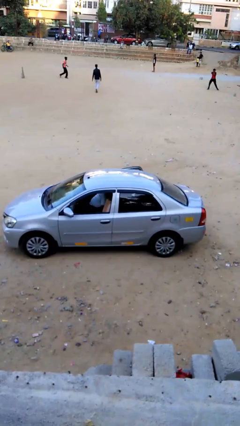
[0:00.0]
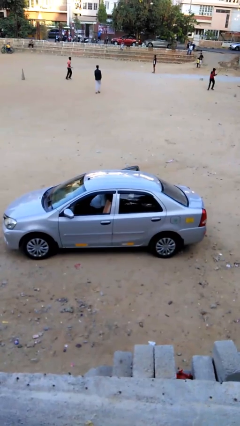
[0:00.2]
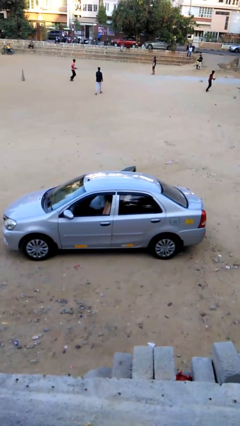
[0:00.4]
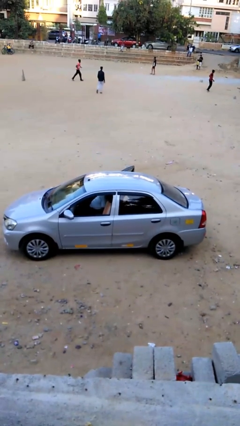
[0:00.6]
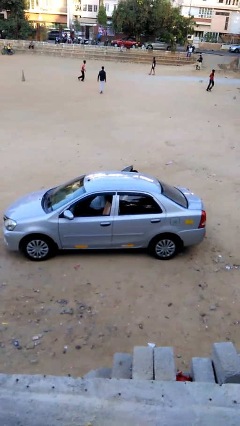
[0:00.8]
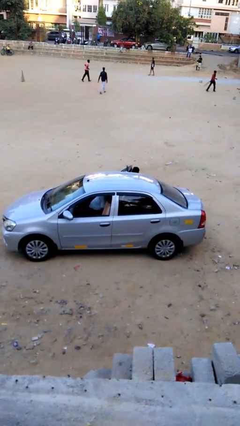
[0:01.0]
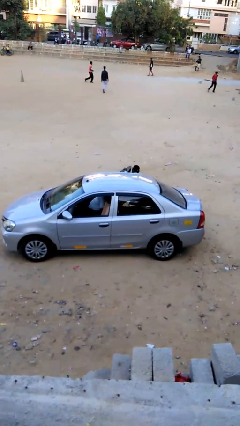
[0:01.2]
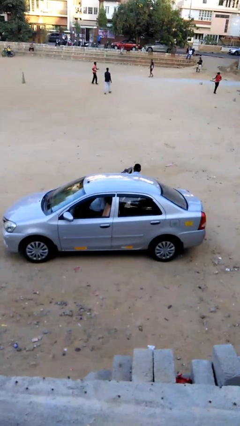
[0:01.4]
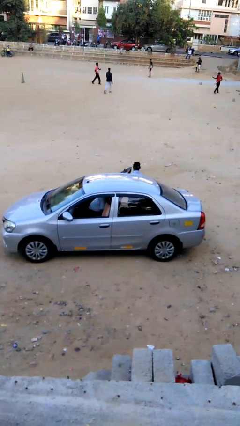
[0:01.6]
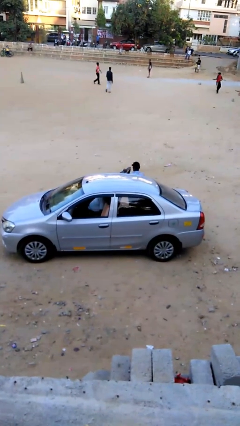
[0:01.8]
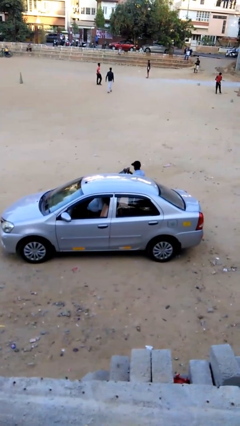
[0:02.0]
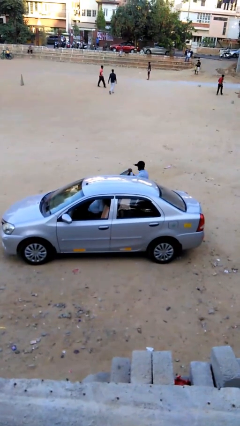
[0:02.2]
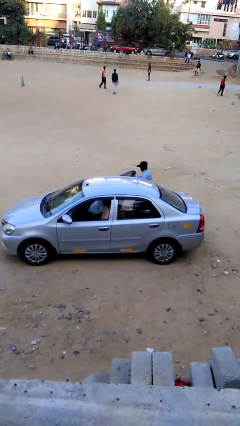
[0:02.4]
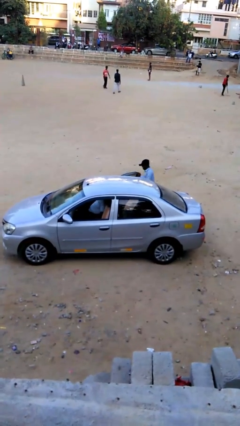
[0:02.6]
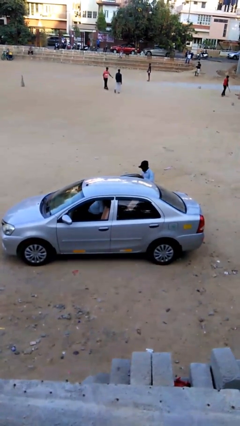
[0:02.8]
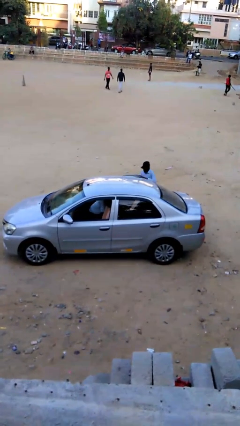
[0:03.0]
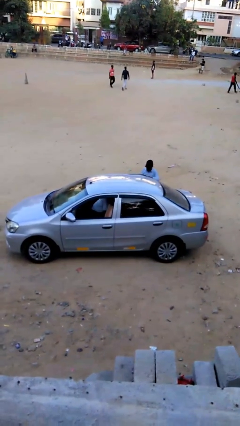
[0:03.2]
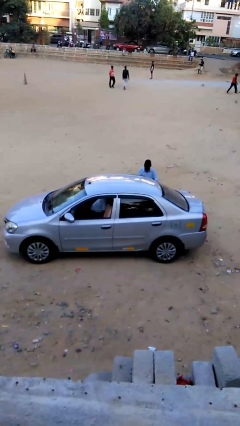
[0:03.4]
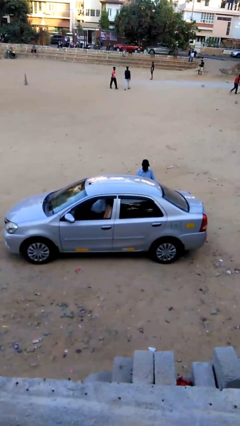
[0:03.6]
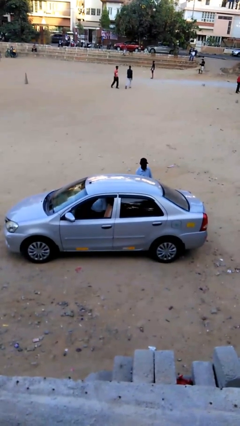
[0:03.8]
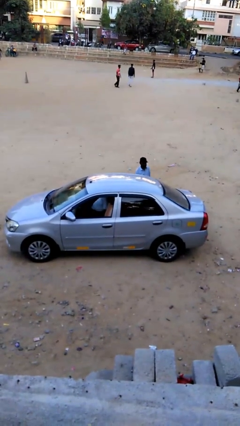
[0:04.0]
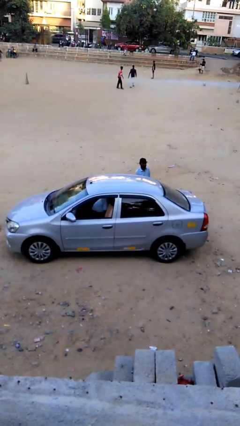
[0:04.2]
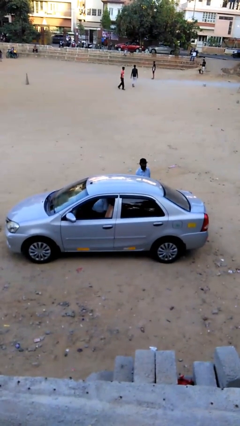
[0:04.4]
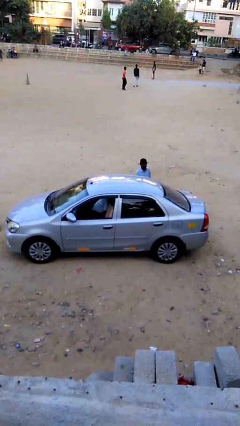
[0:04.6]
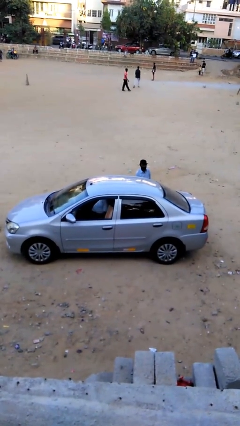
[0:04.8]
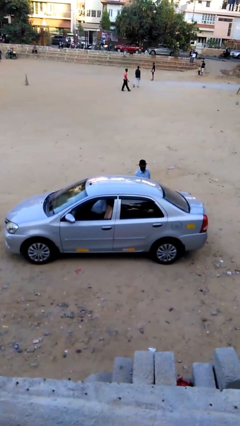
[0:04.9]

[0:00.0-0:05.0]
car drops off person

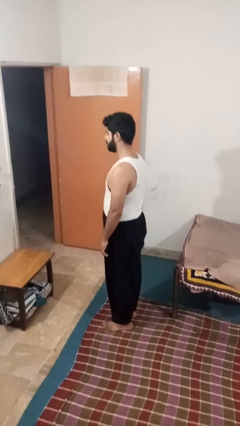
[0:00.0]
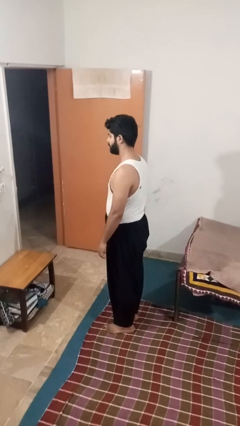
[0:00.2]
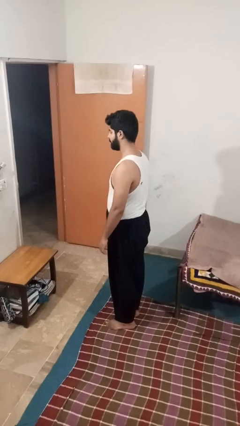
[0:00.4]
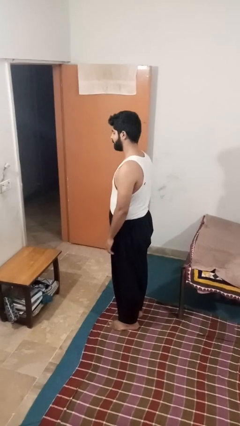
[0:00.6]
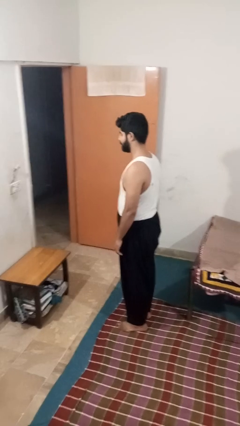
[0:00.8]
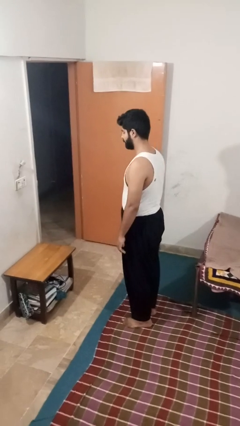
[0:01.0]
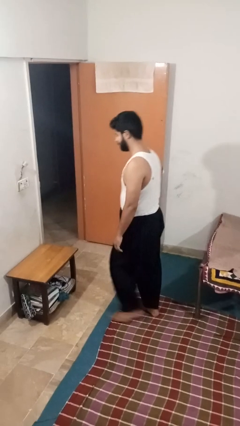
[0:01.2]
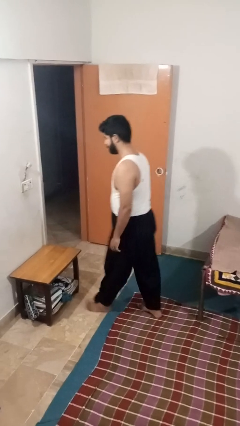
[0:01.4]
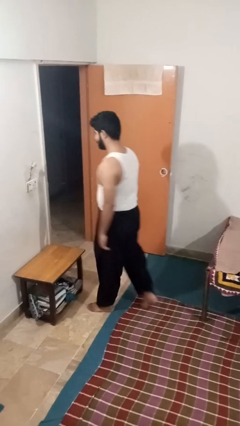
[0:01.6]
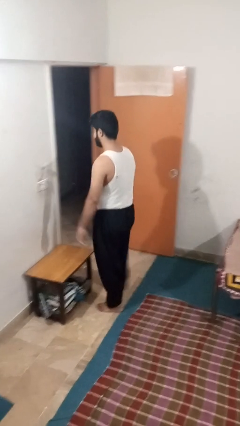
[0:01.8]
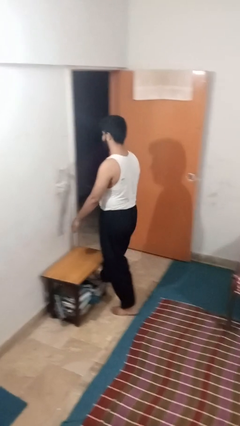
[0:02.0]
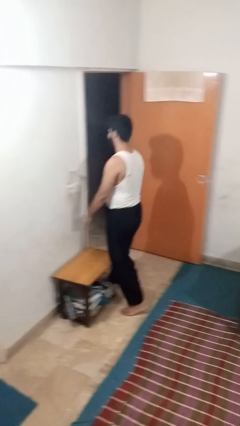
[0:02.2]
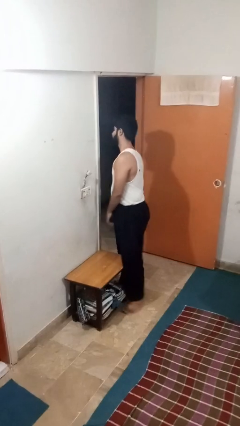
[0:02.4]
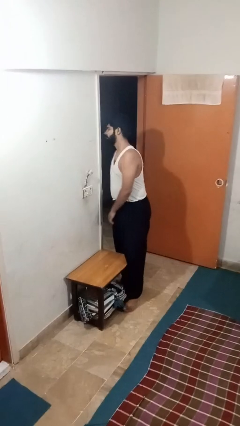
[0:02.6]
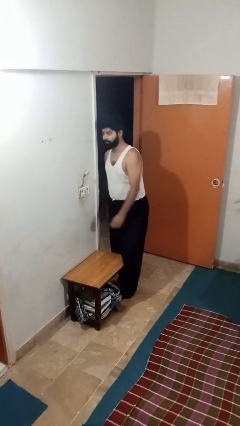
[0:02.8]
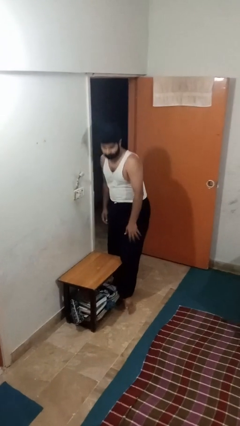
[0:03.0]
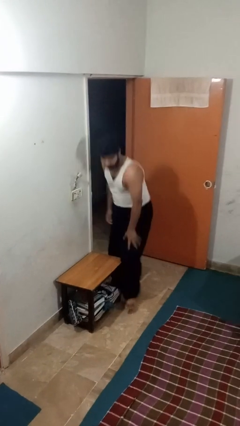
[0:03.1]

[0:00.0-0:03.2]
person bumps into table

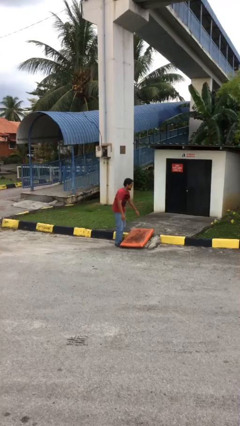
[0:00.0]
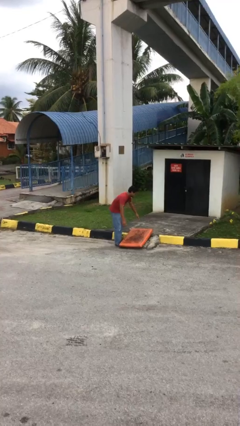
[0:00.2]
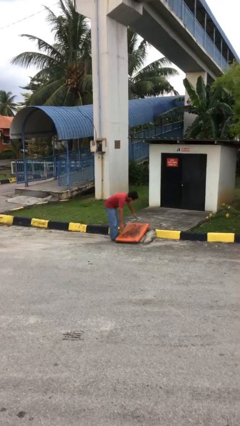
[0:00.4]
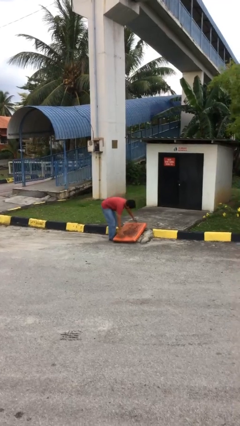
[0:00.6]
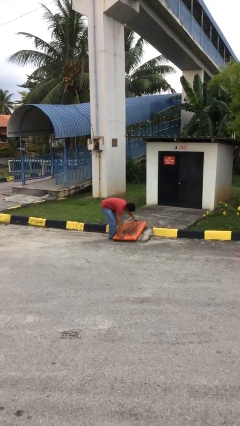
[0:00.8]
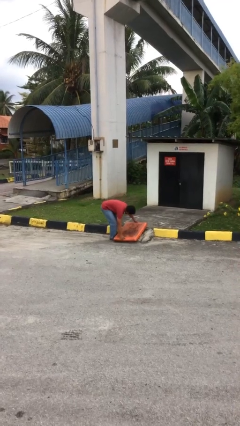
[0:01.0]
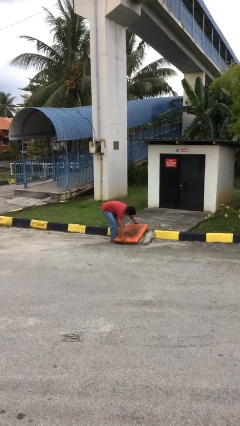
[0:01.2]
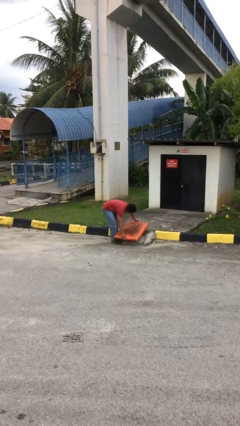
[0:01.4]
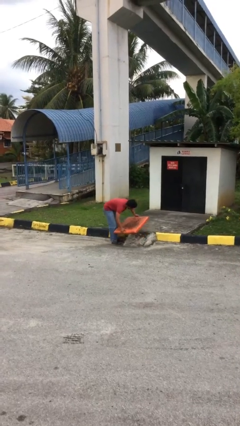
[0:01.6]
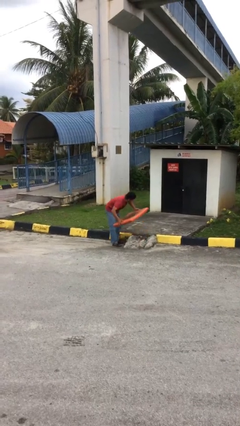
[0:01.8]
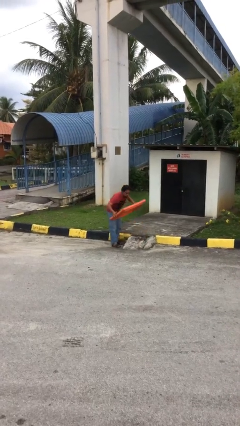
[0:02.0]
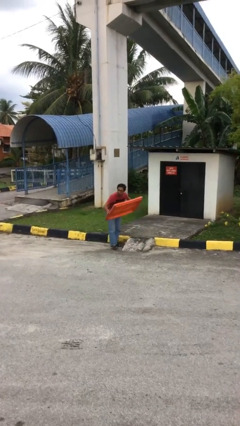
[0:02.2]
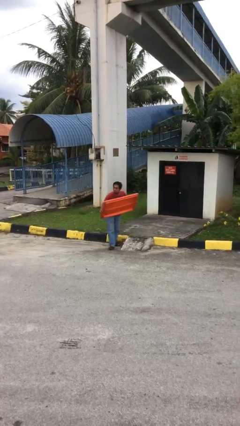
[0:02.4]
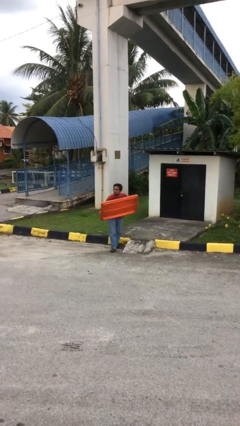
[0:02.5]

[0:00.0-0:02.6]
person picks up object from floor

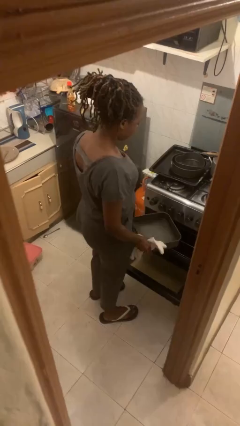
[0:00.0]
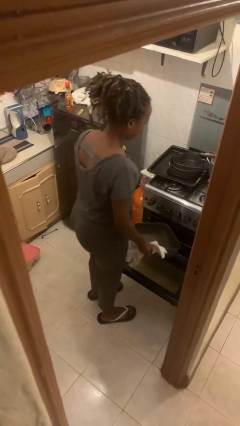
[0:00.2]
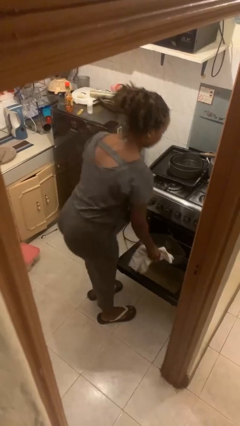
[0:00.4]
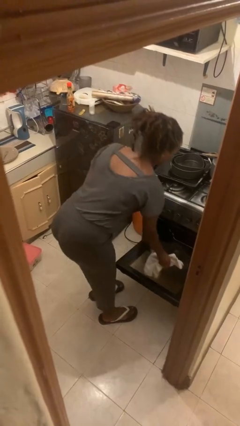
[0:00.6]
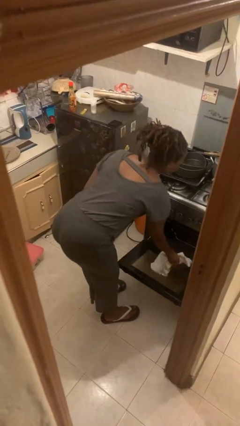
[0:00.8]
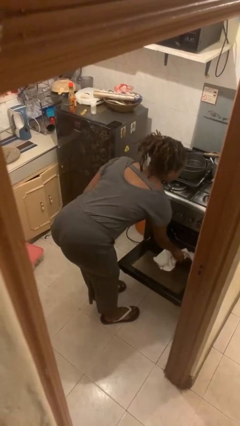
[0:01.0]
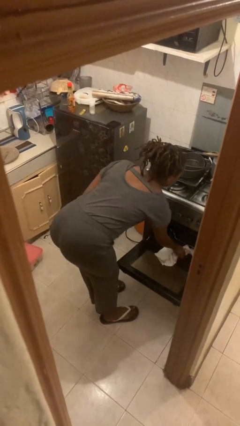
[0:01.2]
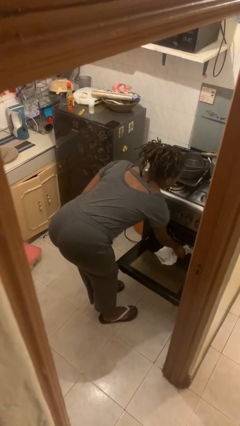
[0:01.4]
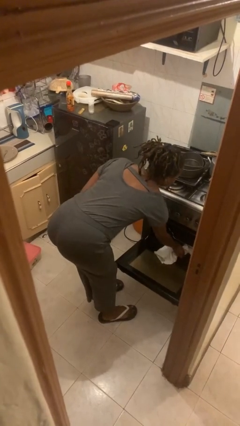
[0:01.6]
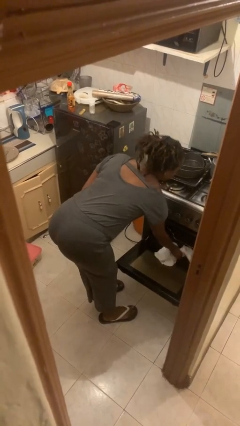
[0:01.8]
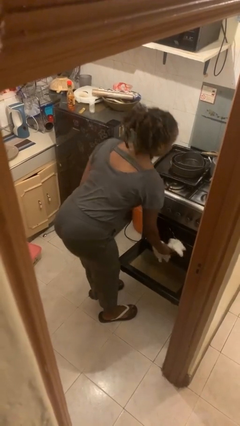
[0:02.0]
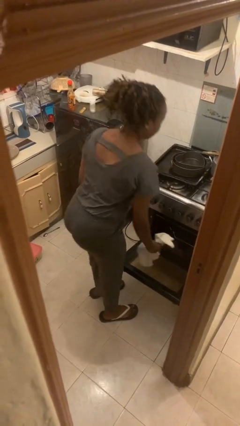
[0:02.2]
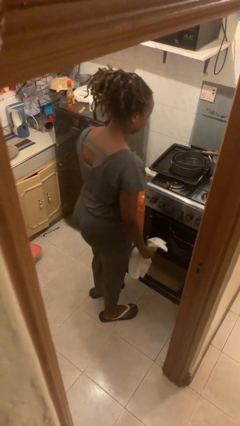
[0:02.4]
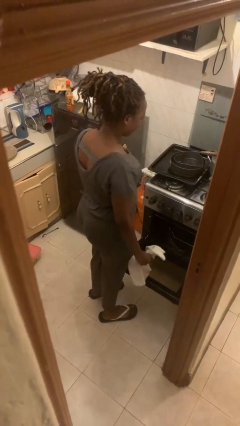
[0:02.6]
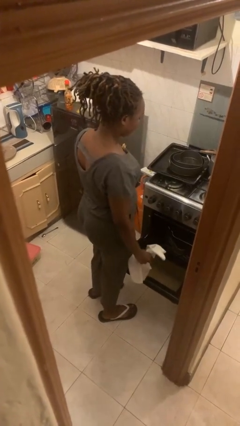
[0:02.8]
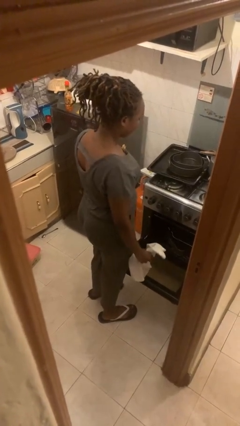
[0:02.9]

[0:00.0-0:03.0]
person puts object into oven

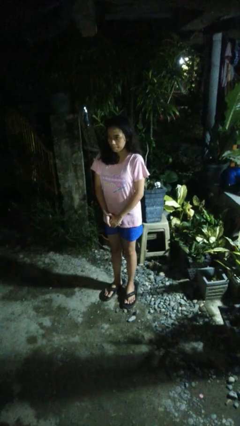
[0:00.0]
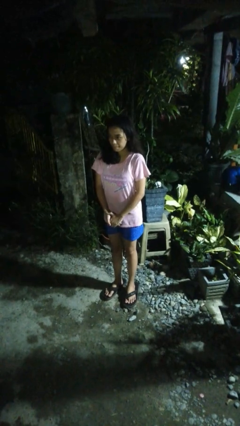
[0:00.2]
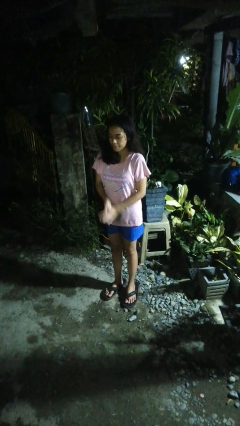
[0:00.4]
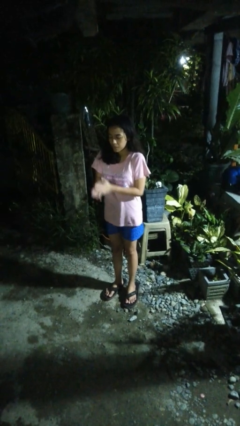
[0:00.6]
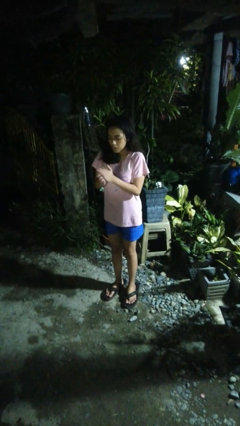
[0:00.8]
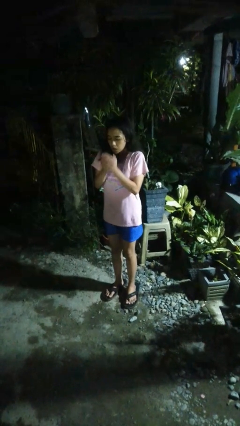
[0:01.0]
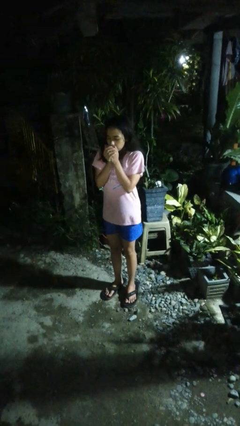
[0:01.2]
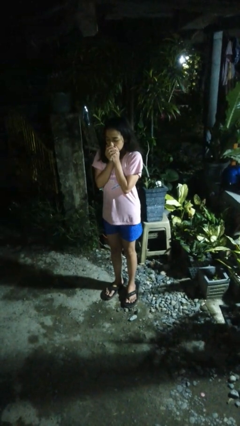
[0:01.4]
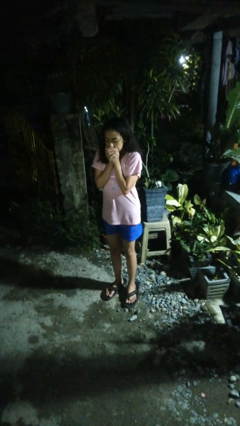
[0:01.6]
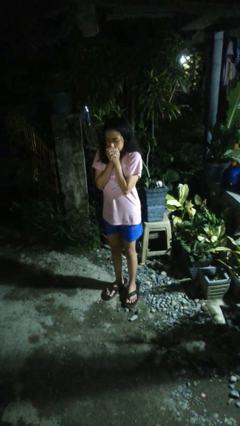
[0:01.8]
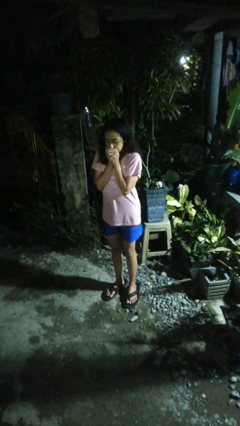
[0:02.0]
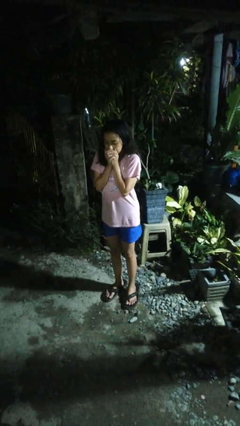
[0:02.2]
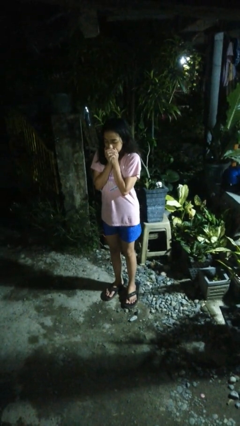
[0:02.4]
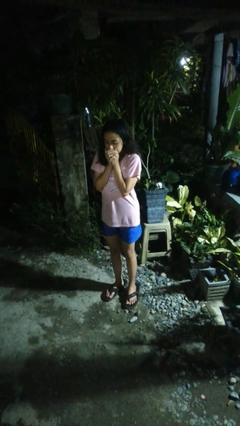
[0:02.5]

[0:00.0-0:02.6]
person blows into hands

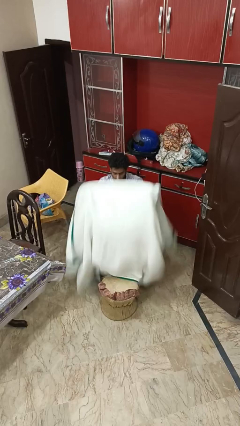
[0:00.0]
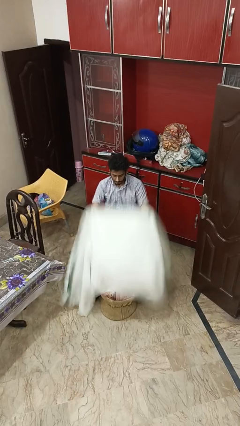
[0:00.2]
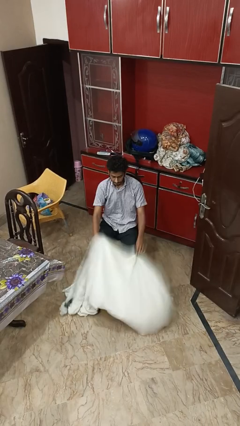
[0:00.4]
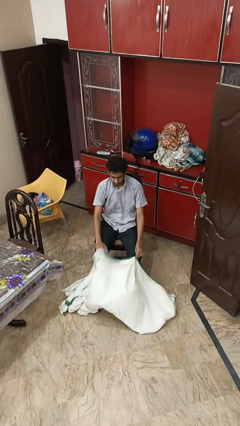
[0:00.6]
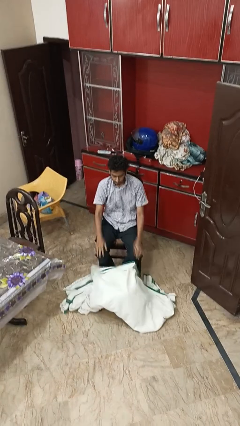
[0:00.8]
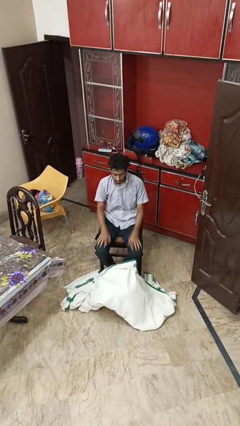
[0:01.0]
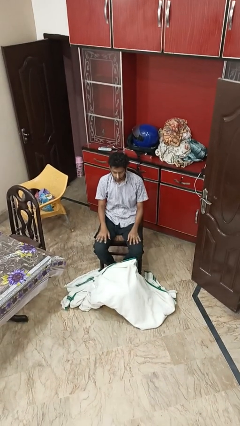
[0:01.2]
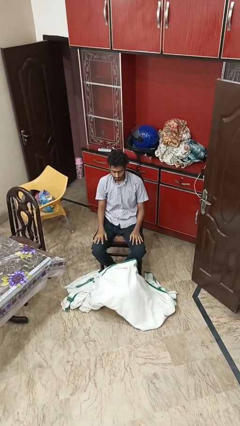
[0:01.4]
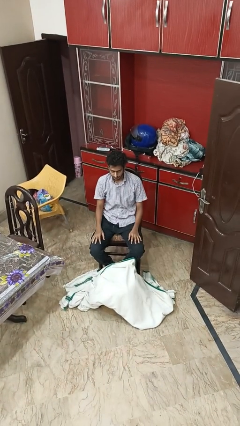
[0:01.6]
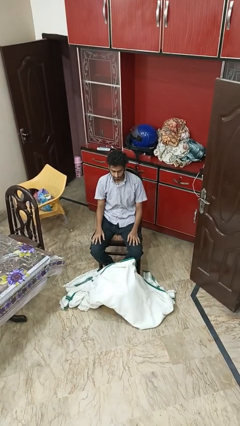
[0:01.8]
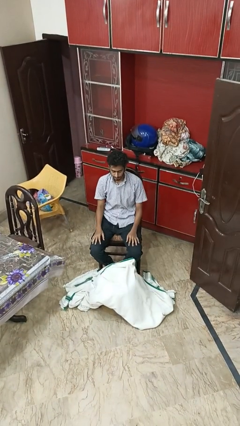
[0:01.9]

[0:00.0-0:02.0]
person uncovers with blanket
